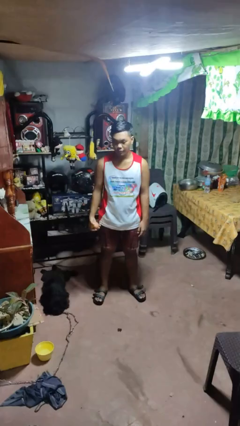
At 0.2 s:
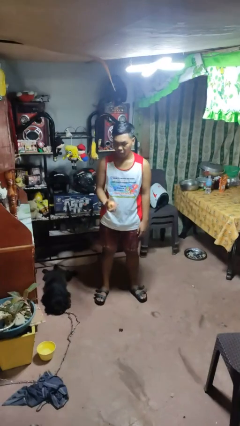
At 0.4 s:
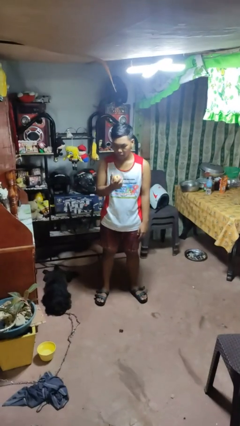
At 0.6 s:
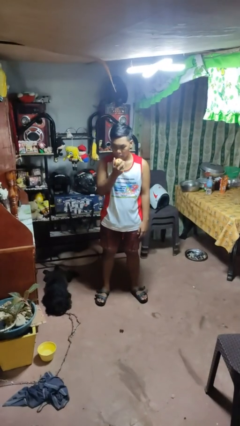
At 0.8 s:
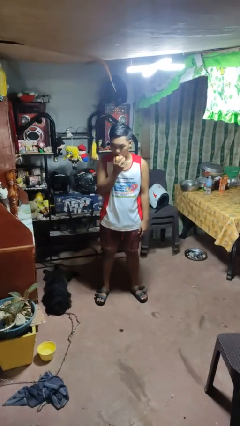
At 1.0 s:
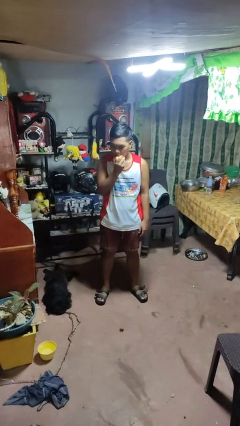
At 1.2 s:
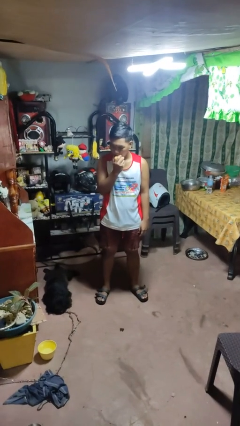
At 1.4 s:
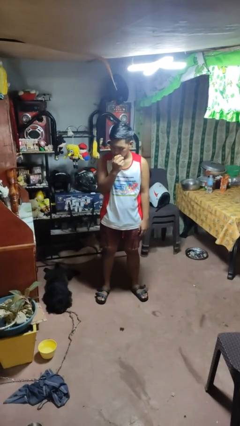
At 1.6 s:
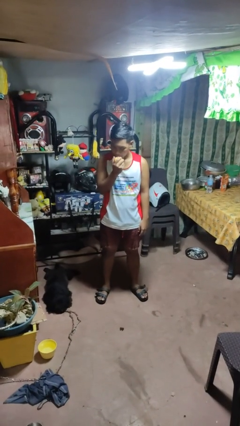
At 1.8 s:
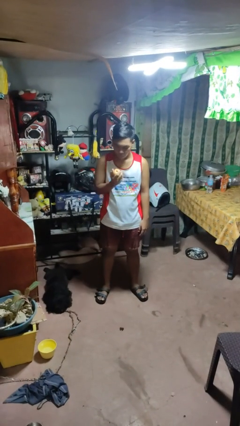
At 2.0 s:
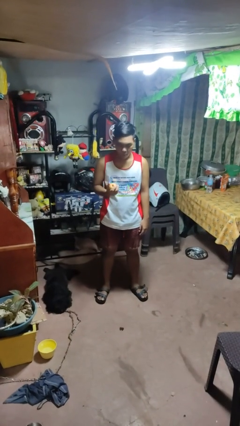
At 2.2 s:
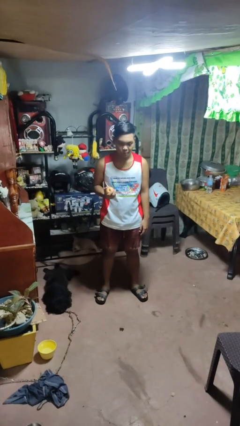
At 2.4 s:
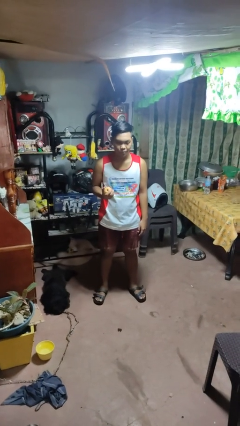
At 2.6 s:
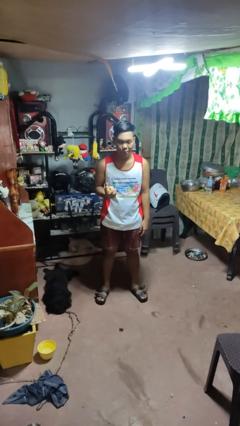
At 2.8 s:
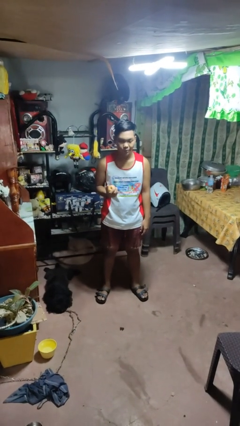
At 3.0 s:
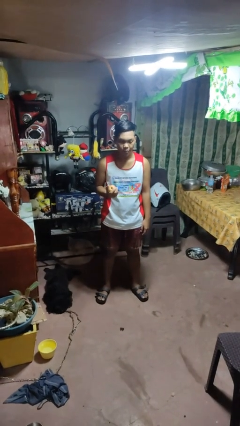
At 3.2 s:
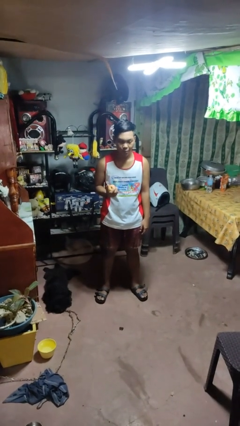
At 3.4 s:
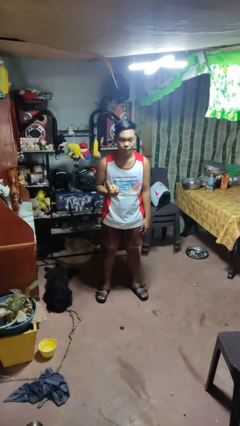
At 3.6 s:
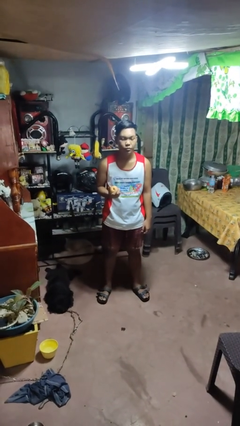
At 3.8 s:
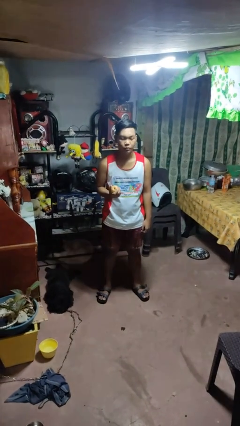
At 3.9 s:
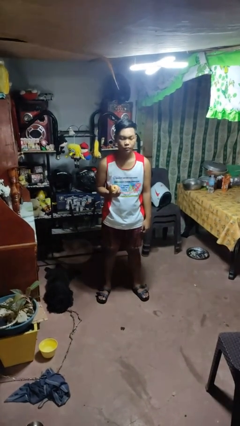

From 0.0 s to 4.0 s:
person eats apple

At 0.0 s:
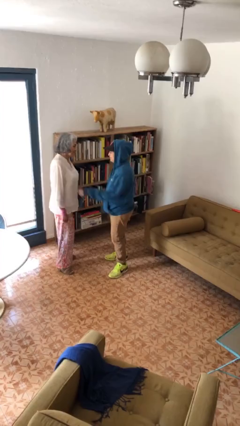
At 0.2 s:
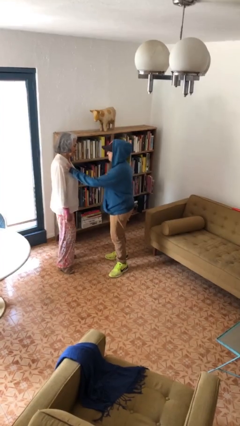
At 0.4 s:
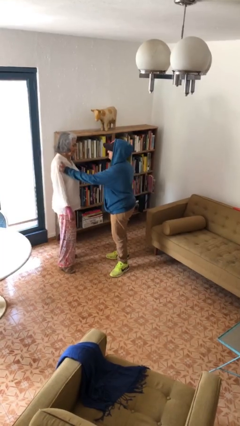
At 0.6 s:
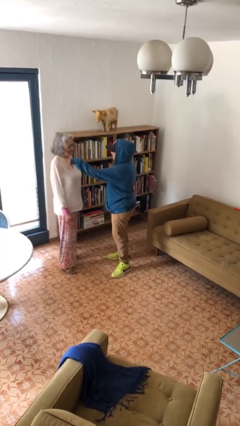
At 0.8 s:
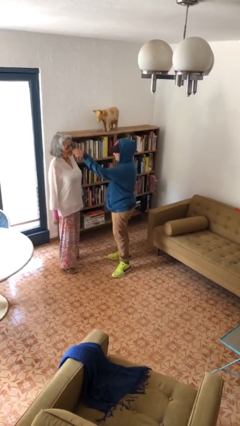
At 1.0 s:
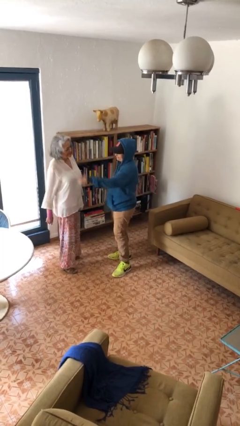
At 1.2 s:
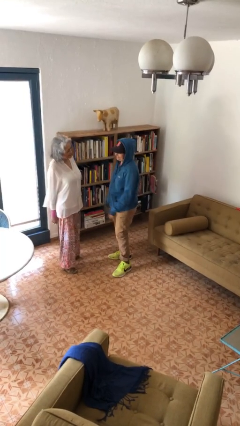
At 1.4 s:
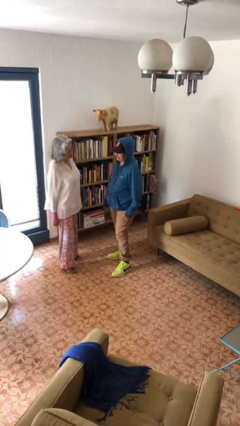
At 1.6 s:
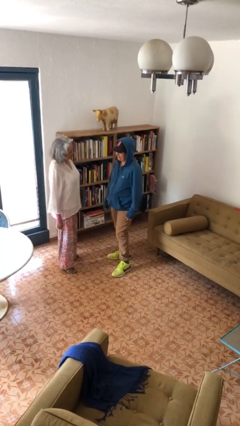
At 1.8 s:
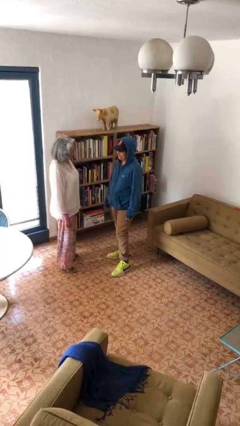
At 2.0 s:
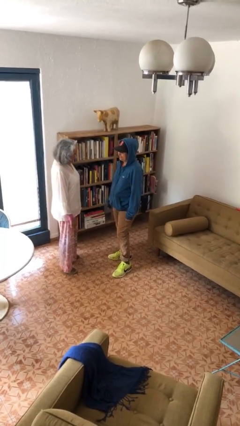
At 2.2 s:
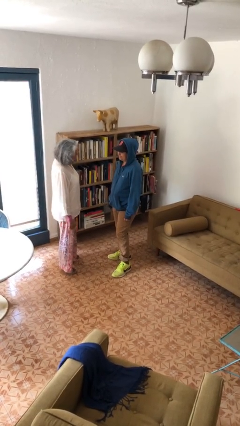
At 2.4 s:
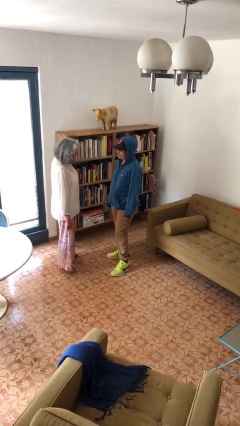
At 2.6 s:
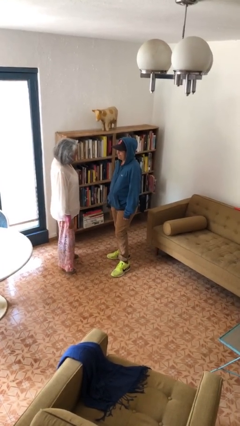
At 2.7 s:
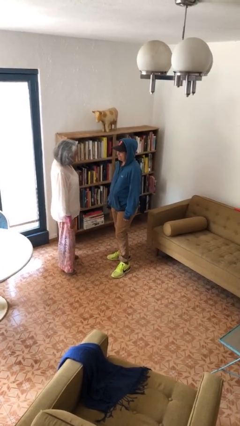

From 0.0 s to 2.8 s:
person shoves person

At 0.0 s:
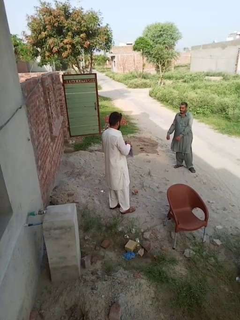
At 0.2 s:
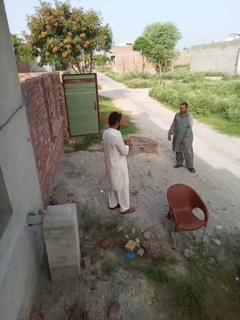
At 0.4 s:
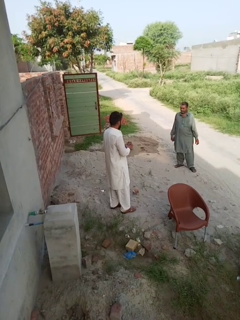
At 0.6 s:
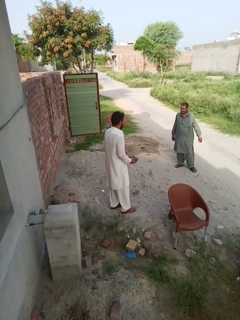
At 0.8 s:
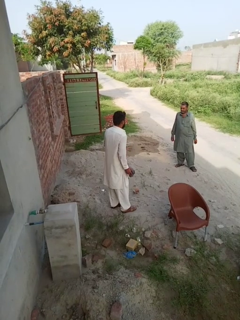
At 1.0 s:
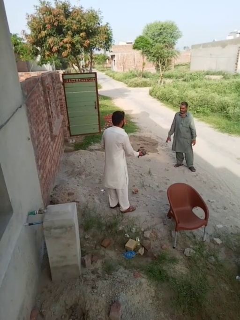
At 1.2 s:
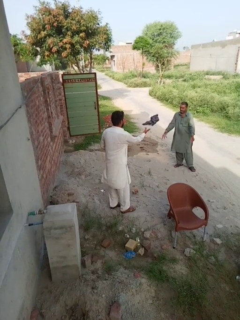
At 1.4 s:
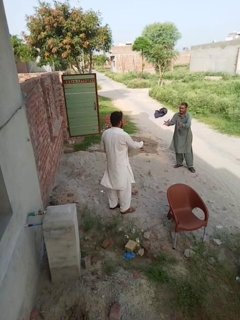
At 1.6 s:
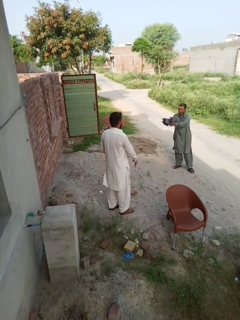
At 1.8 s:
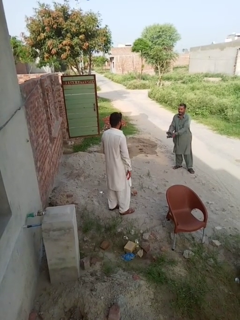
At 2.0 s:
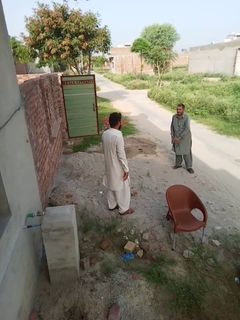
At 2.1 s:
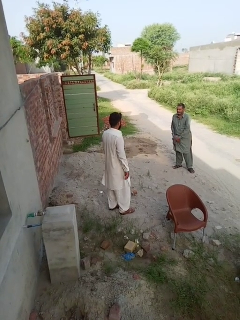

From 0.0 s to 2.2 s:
person throws object to person

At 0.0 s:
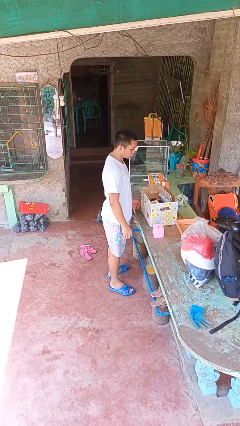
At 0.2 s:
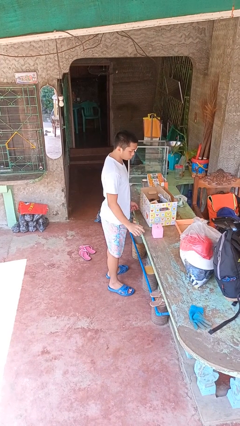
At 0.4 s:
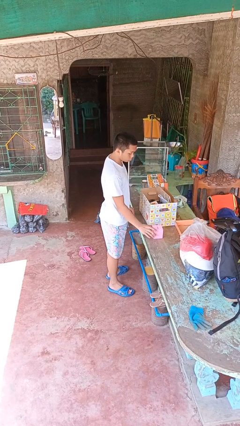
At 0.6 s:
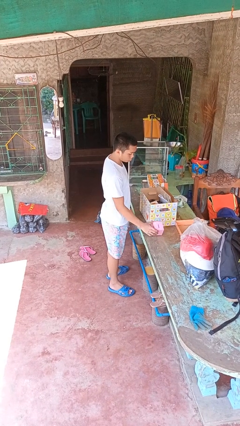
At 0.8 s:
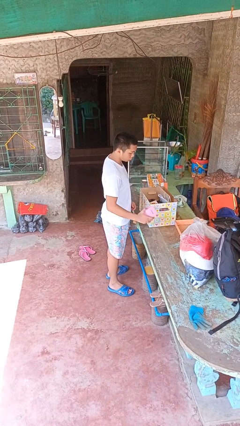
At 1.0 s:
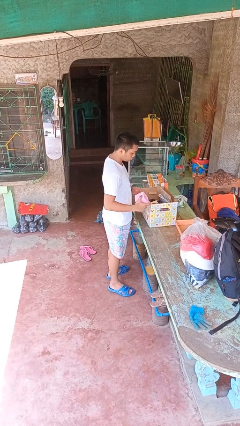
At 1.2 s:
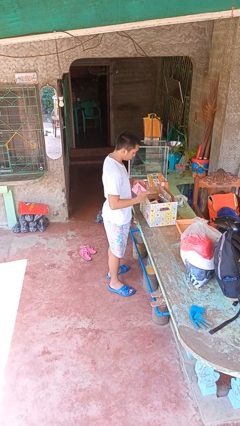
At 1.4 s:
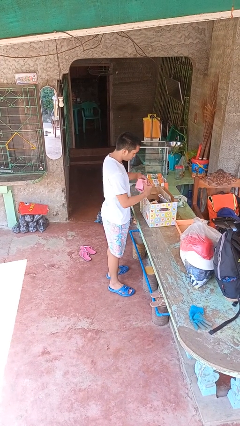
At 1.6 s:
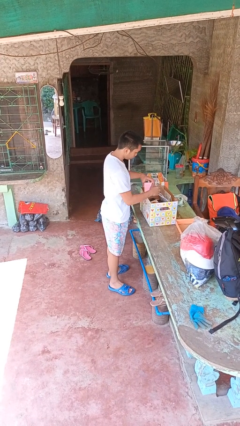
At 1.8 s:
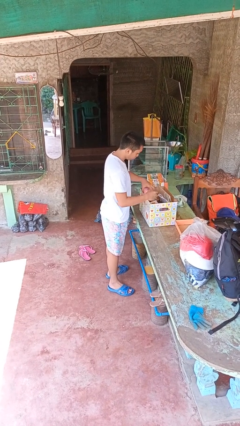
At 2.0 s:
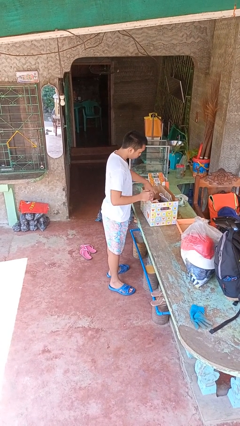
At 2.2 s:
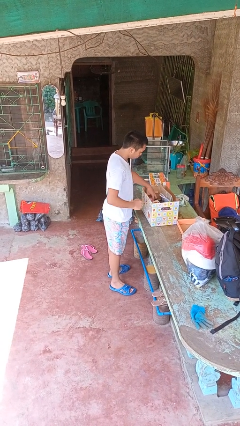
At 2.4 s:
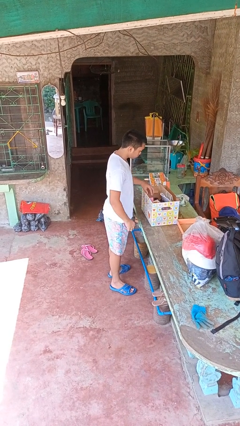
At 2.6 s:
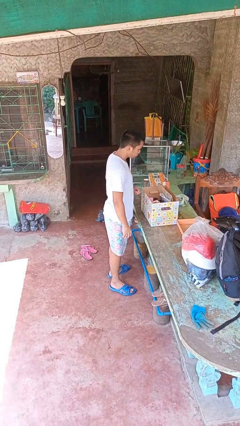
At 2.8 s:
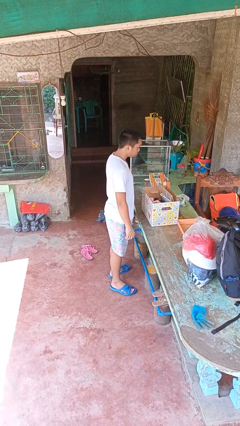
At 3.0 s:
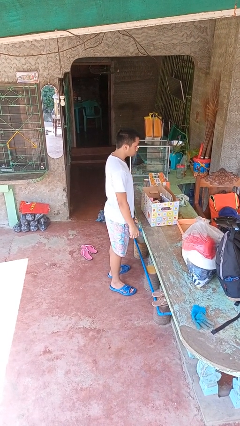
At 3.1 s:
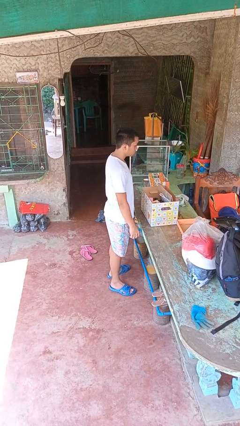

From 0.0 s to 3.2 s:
person puts object into box

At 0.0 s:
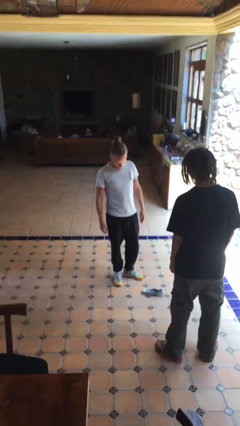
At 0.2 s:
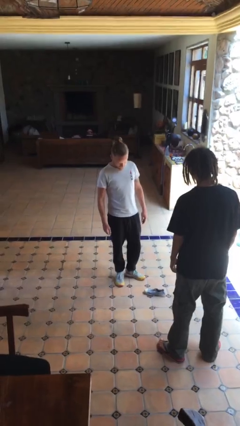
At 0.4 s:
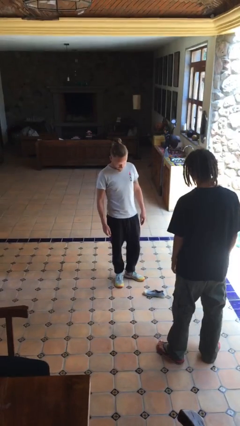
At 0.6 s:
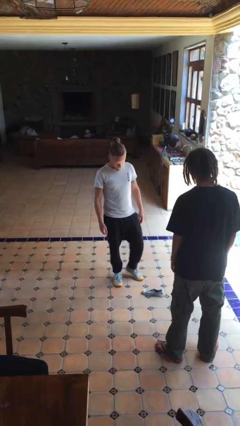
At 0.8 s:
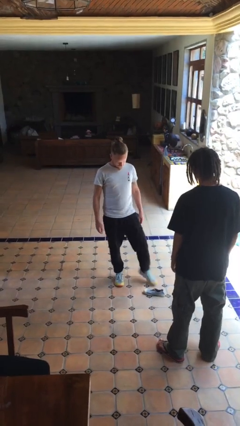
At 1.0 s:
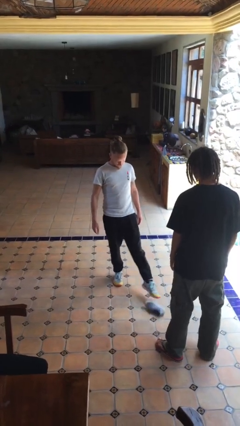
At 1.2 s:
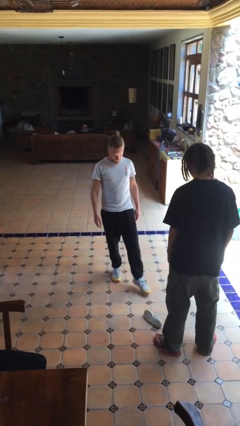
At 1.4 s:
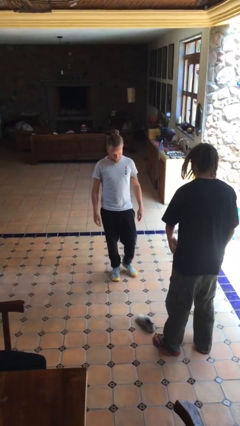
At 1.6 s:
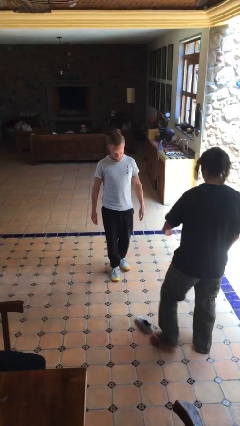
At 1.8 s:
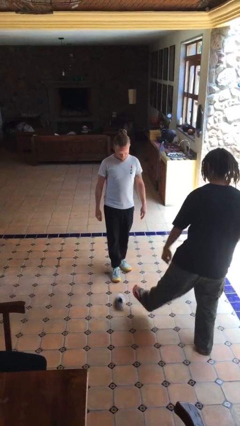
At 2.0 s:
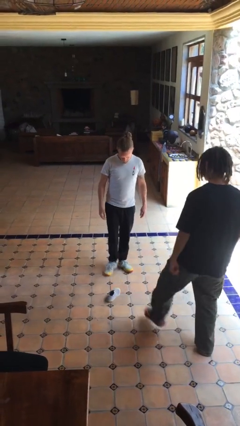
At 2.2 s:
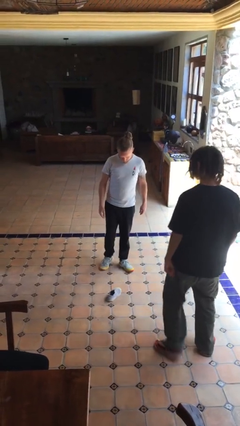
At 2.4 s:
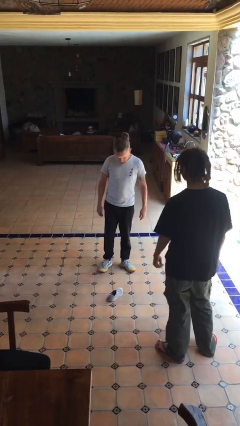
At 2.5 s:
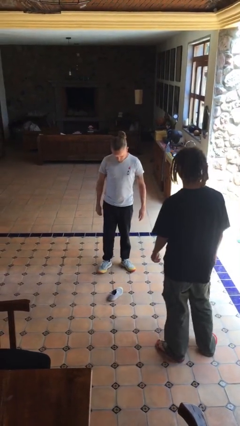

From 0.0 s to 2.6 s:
person kicks object to person

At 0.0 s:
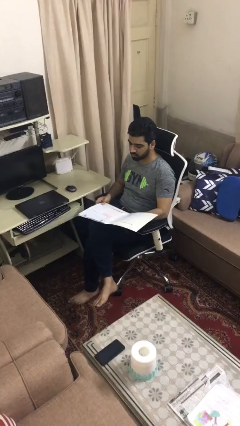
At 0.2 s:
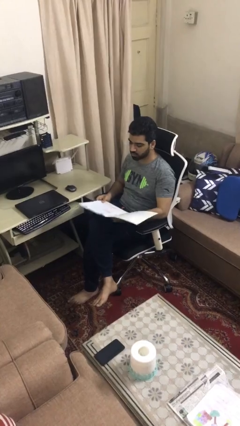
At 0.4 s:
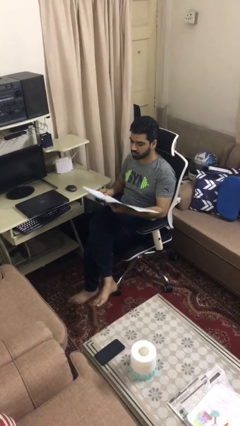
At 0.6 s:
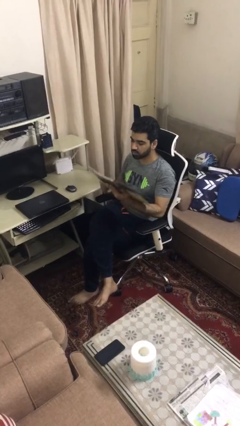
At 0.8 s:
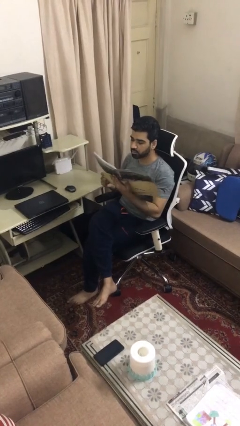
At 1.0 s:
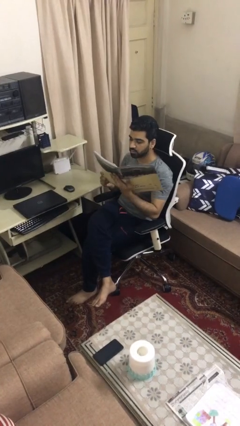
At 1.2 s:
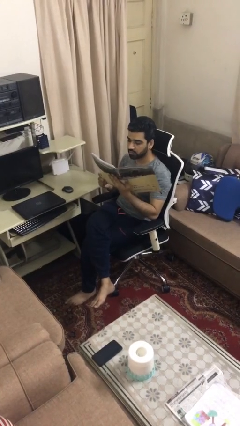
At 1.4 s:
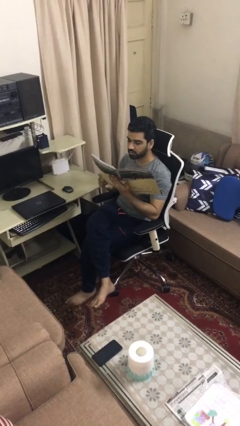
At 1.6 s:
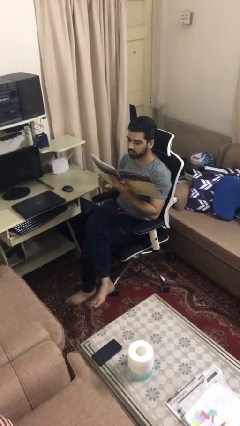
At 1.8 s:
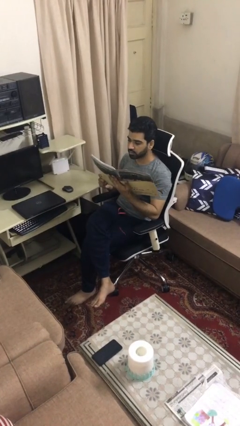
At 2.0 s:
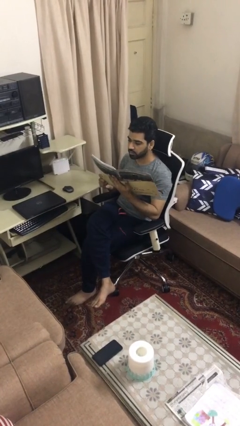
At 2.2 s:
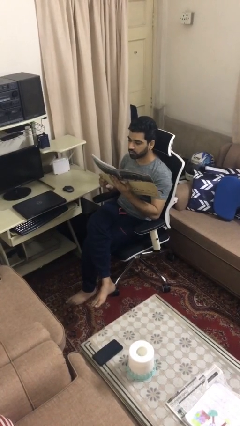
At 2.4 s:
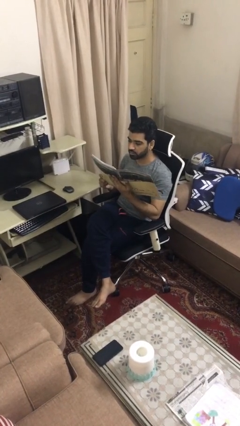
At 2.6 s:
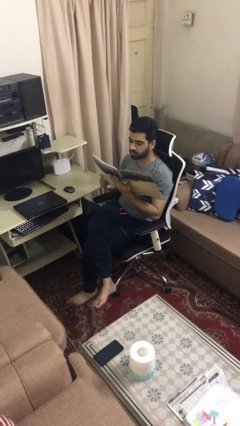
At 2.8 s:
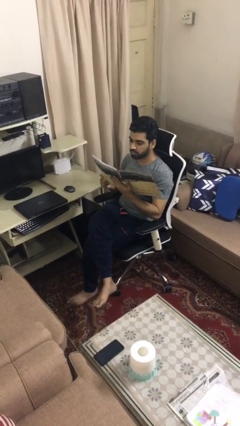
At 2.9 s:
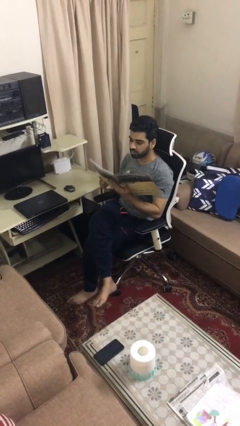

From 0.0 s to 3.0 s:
person reads document
